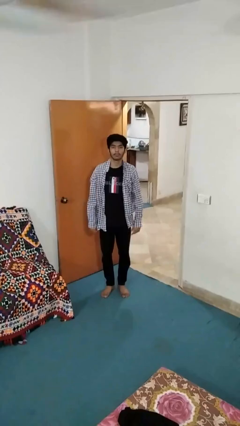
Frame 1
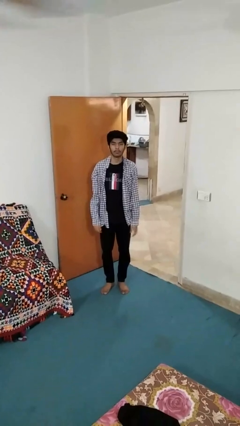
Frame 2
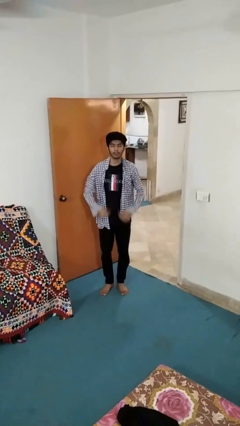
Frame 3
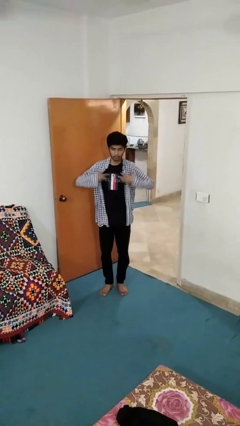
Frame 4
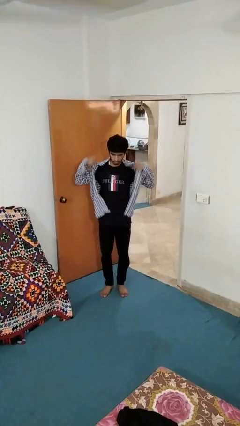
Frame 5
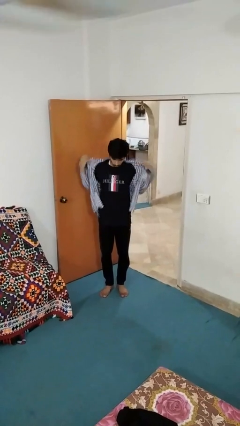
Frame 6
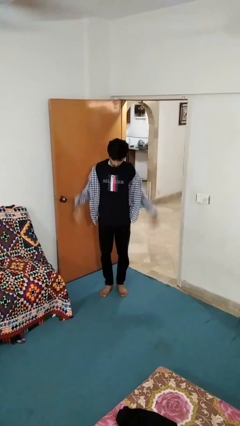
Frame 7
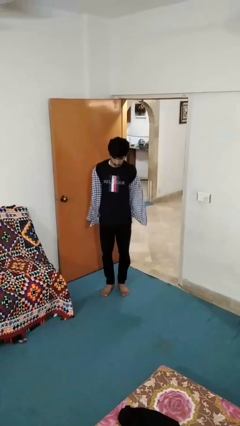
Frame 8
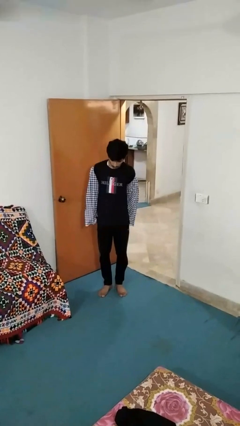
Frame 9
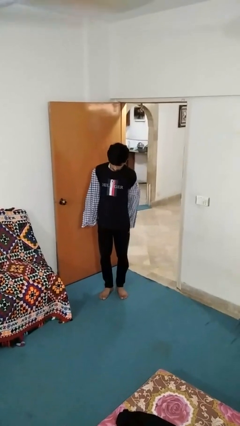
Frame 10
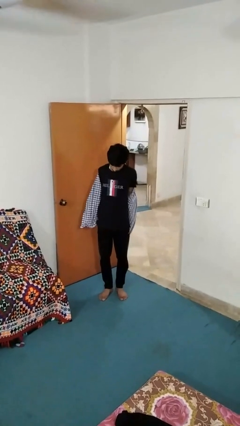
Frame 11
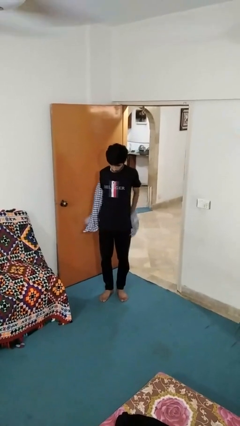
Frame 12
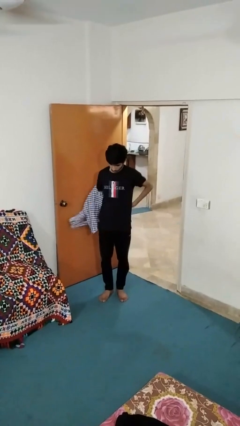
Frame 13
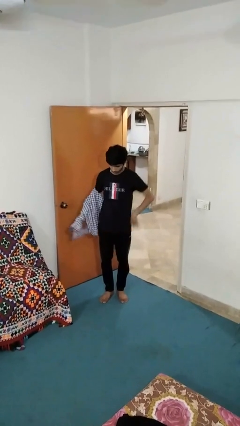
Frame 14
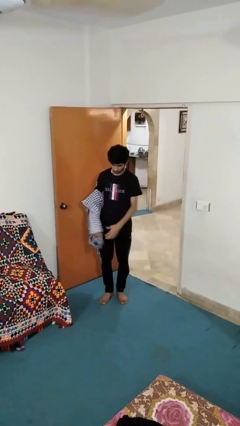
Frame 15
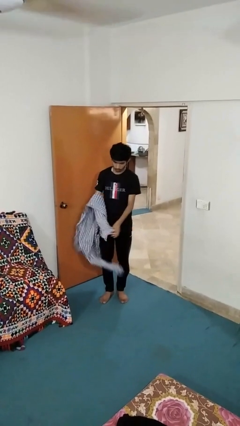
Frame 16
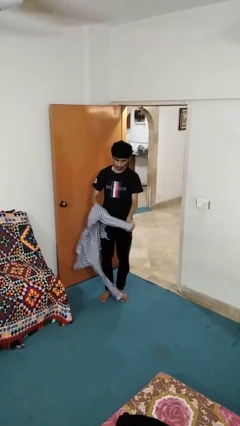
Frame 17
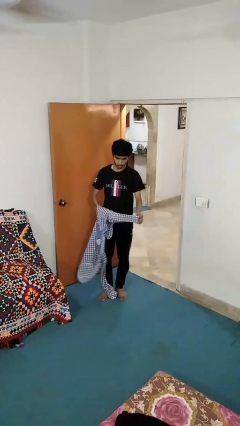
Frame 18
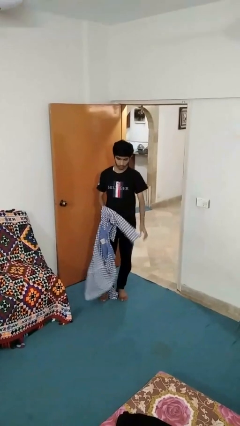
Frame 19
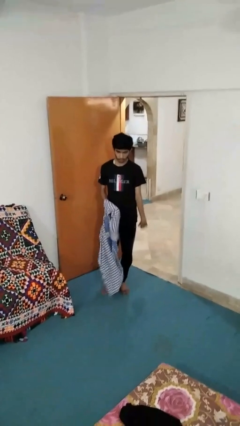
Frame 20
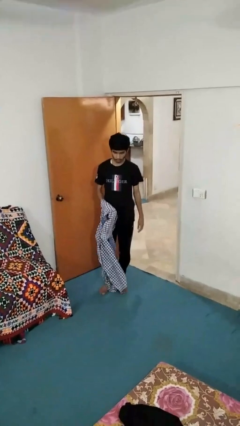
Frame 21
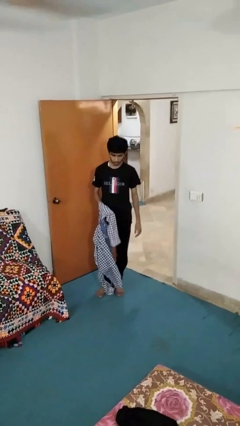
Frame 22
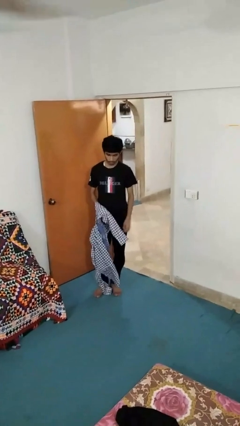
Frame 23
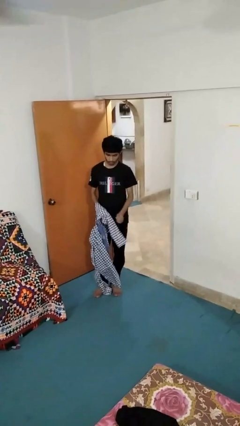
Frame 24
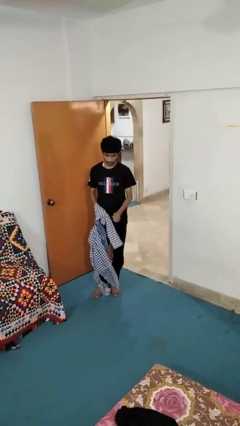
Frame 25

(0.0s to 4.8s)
person takes off shirt

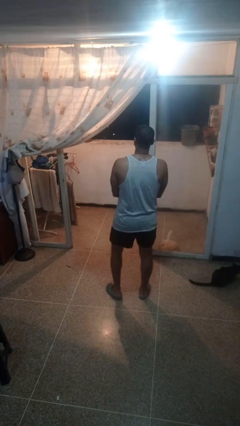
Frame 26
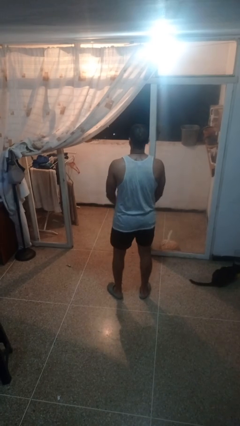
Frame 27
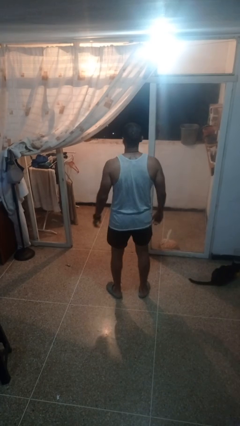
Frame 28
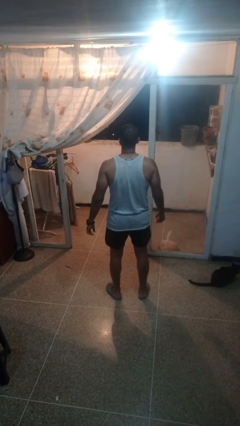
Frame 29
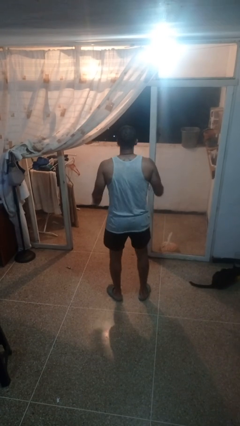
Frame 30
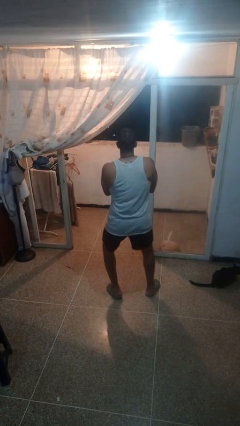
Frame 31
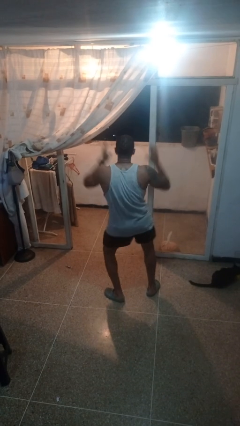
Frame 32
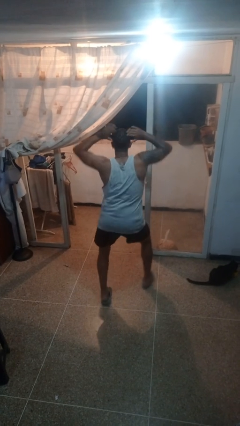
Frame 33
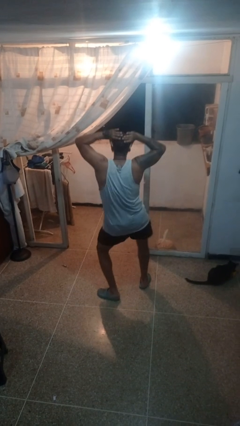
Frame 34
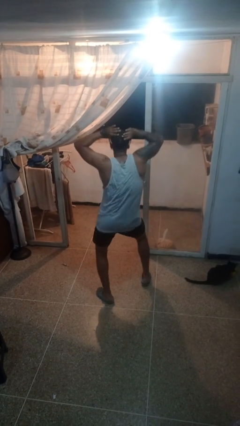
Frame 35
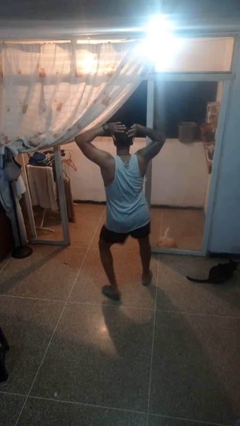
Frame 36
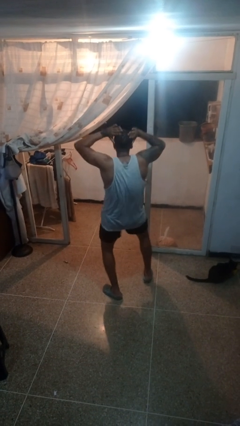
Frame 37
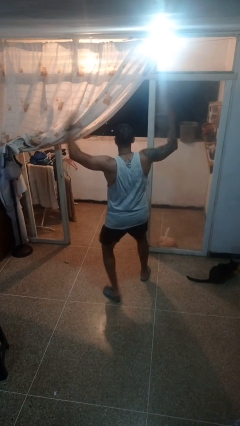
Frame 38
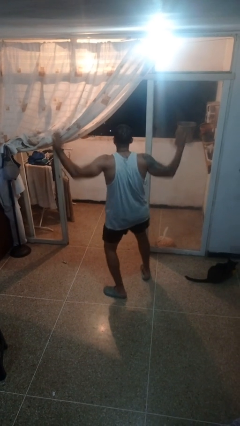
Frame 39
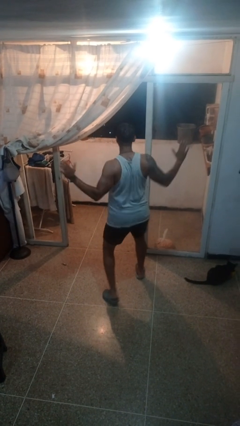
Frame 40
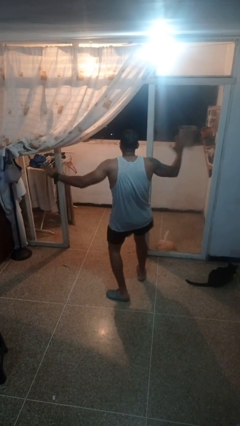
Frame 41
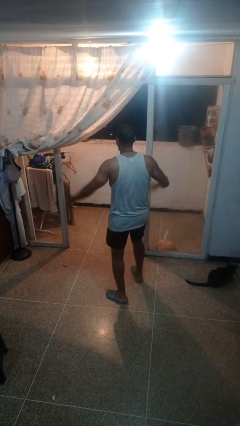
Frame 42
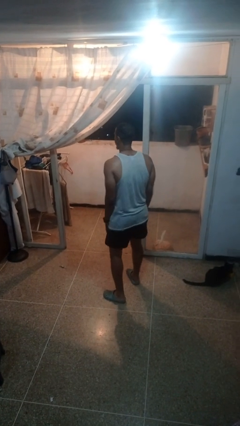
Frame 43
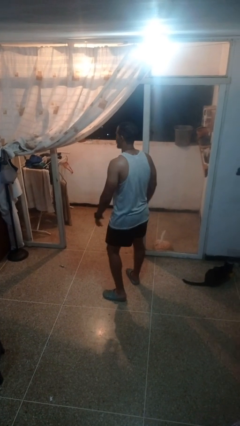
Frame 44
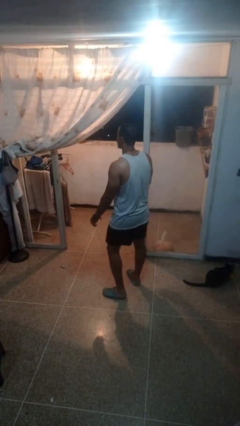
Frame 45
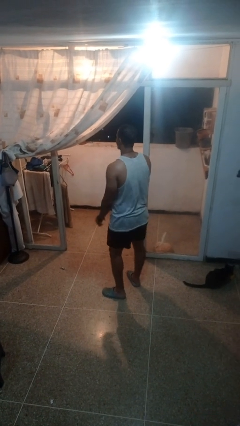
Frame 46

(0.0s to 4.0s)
person dances in place

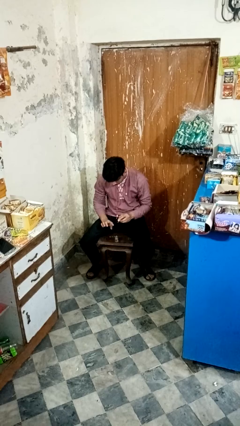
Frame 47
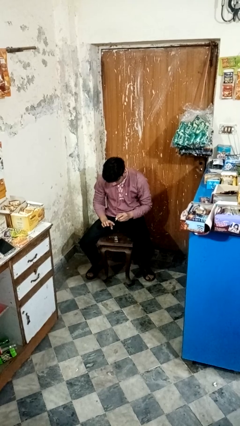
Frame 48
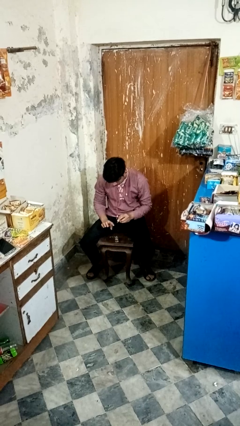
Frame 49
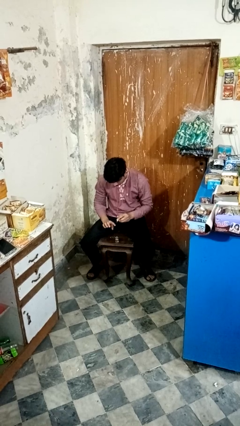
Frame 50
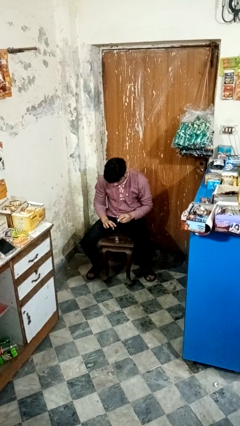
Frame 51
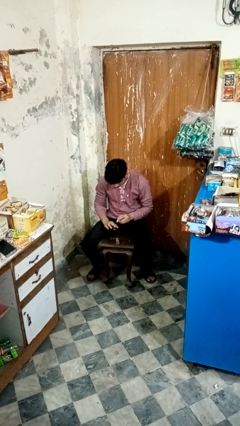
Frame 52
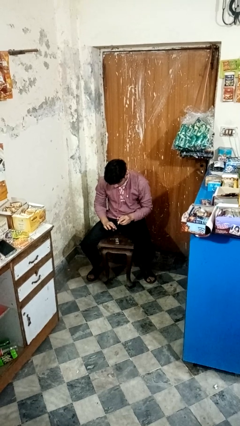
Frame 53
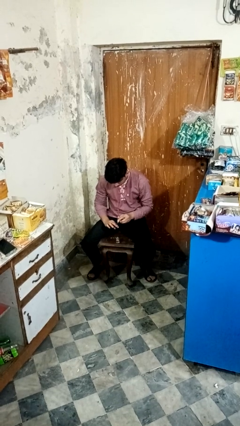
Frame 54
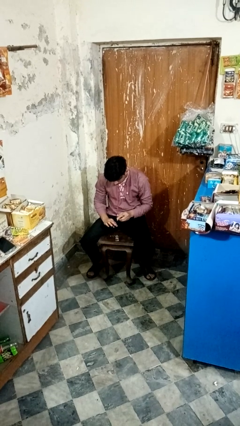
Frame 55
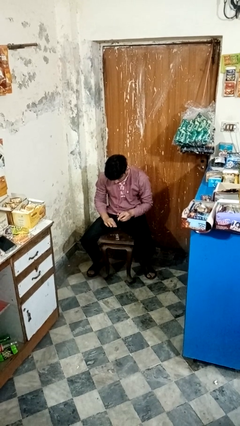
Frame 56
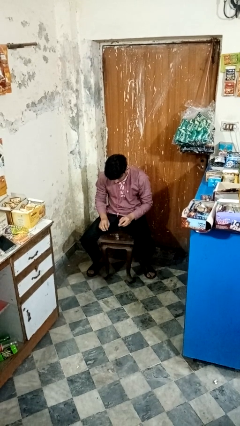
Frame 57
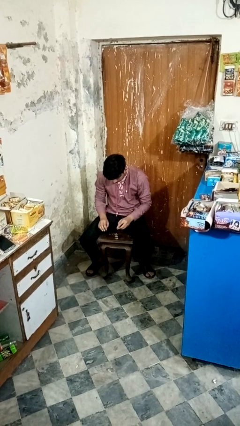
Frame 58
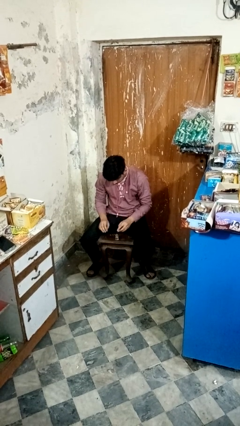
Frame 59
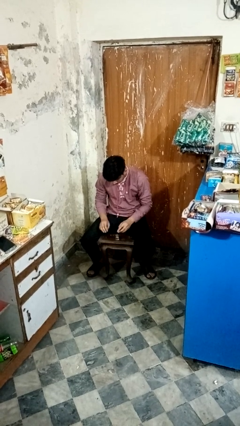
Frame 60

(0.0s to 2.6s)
person paints fingernails

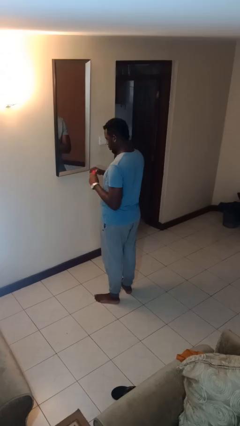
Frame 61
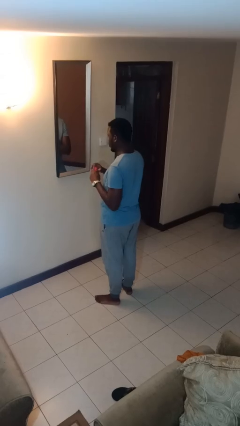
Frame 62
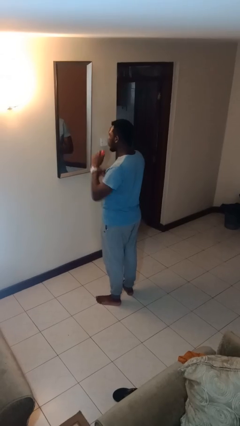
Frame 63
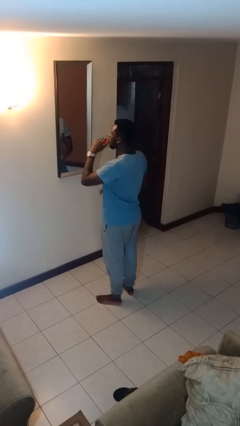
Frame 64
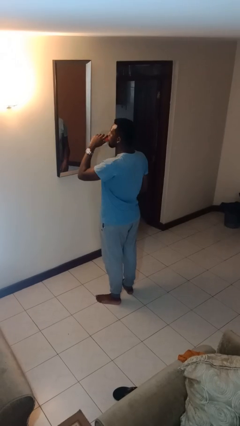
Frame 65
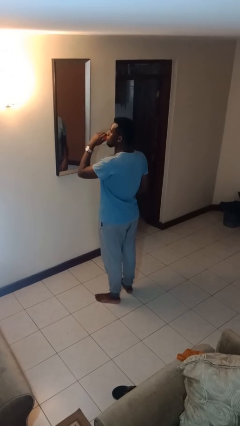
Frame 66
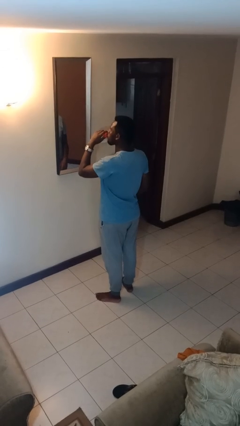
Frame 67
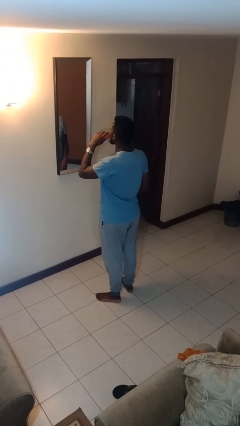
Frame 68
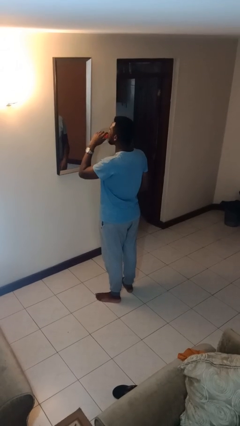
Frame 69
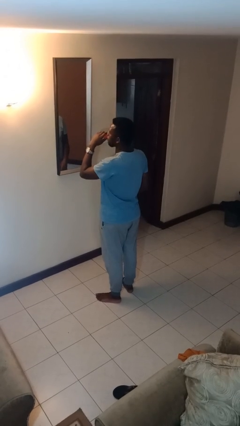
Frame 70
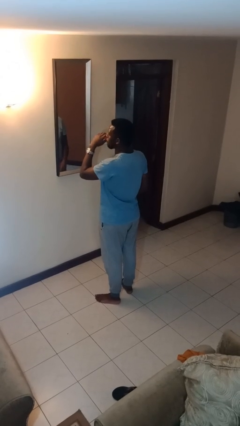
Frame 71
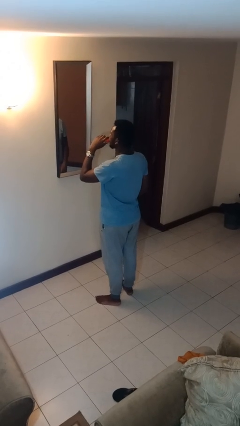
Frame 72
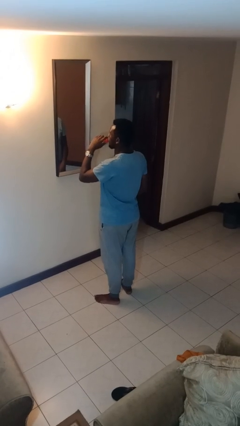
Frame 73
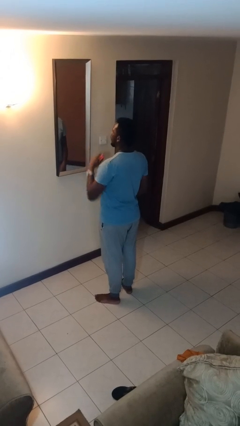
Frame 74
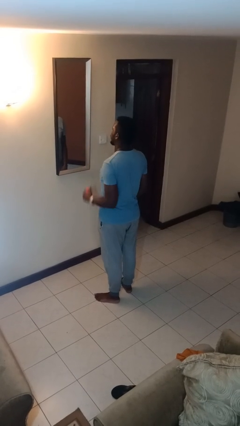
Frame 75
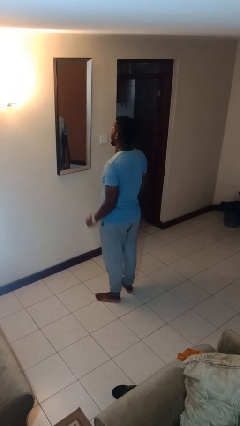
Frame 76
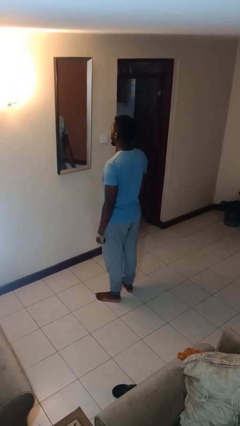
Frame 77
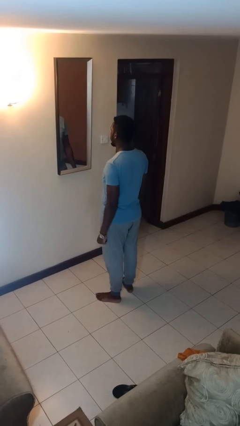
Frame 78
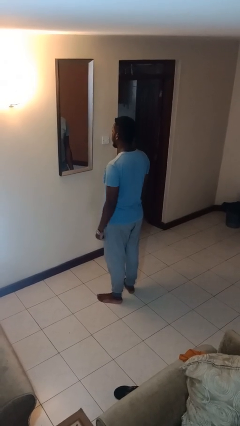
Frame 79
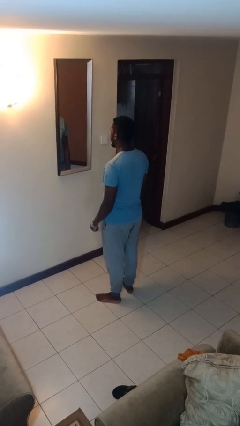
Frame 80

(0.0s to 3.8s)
person applies lip makeup

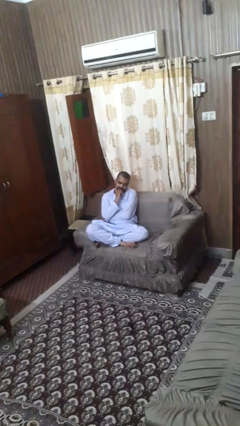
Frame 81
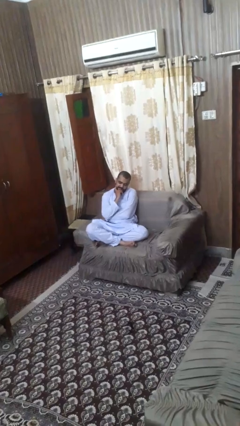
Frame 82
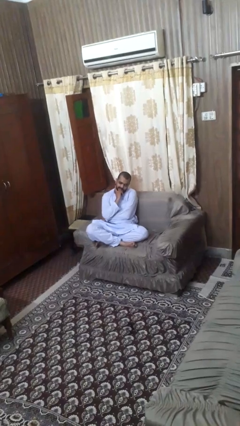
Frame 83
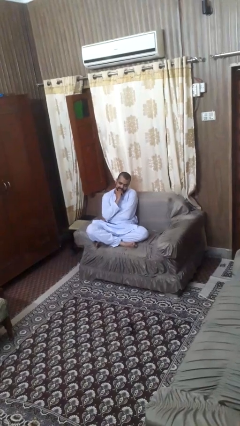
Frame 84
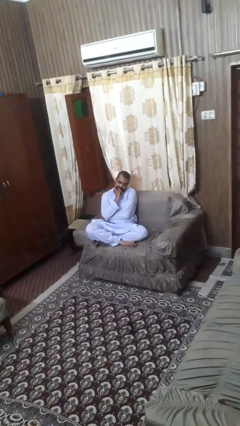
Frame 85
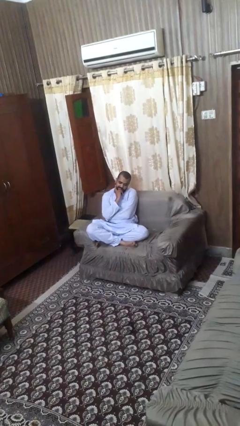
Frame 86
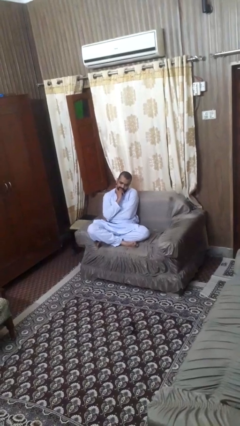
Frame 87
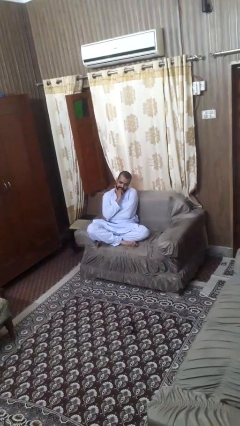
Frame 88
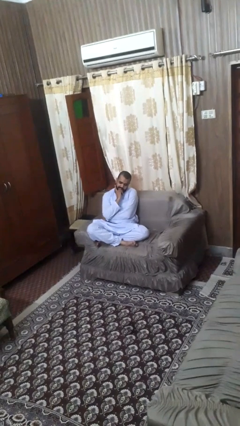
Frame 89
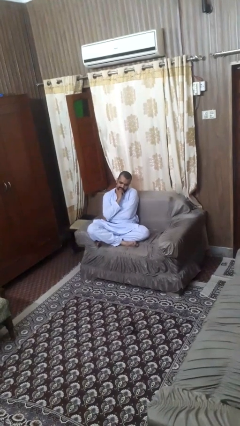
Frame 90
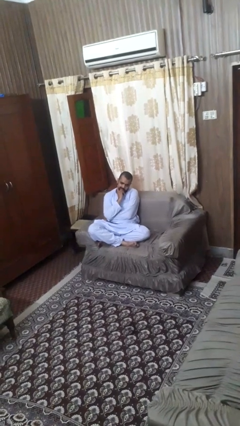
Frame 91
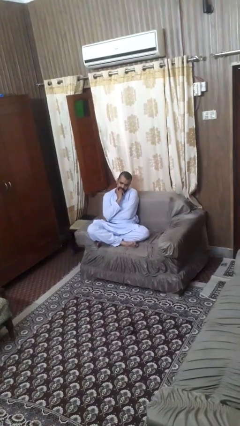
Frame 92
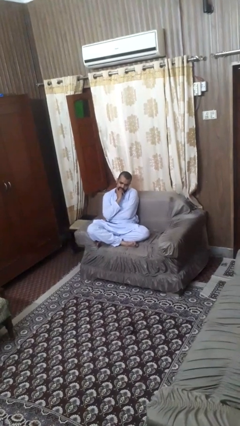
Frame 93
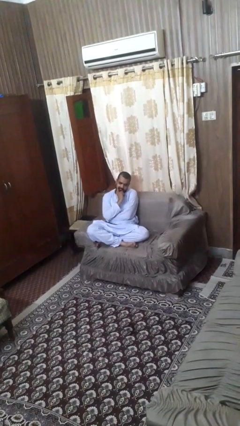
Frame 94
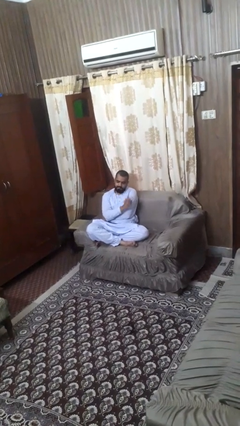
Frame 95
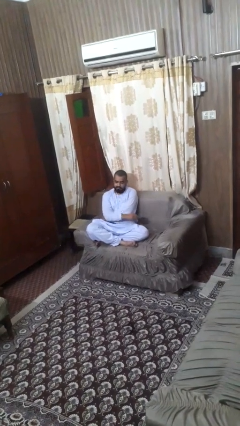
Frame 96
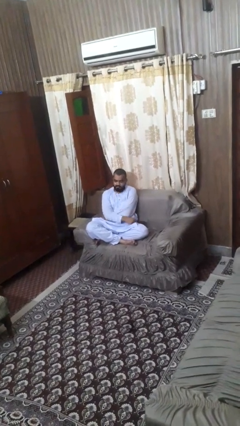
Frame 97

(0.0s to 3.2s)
person strokes chin
